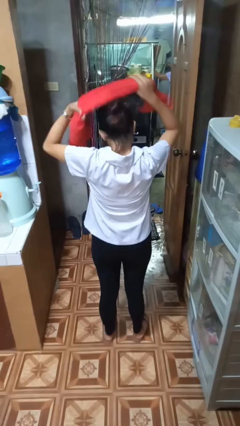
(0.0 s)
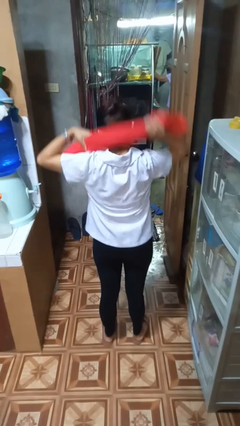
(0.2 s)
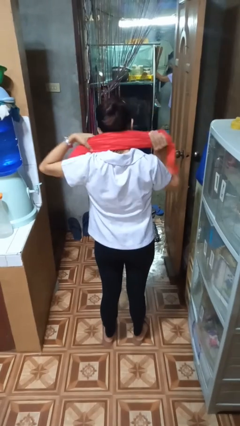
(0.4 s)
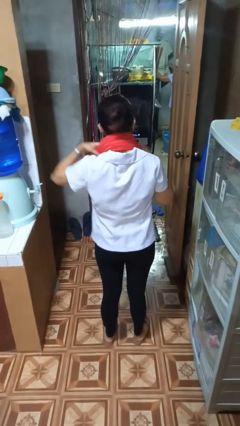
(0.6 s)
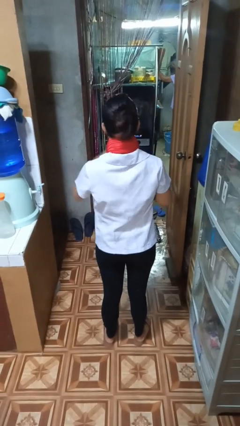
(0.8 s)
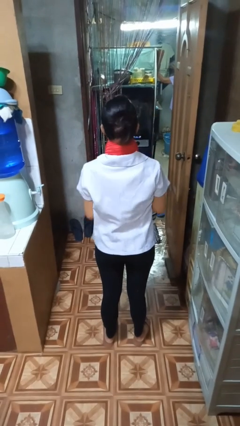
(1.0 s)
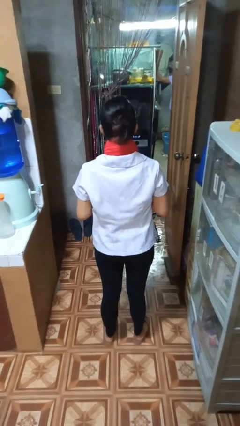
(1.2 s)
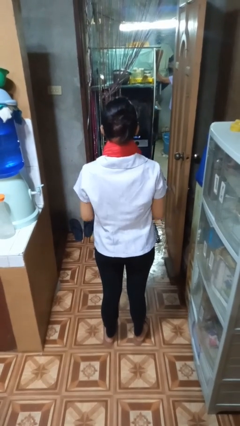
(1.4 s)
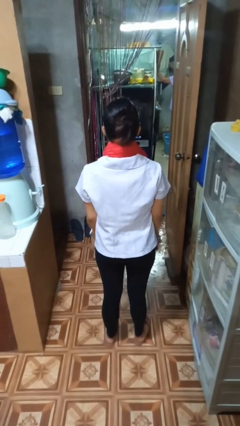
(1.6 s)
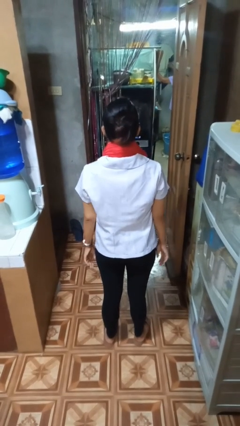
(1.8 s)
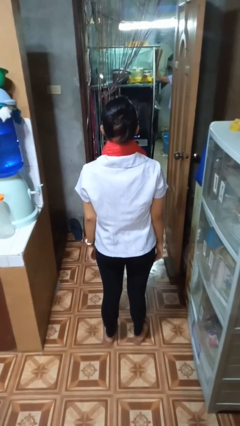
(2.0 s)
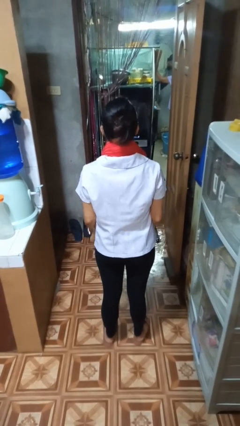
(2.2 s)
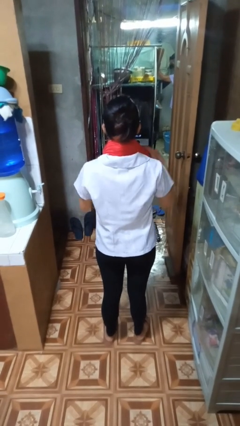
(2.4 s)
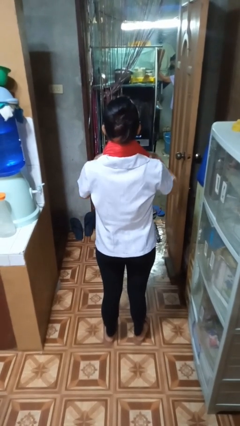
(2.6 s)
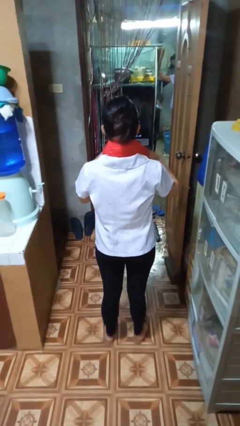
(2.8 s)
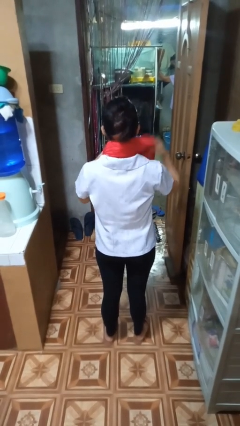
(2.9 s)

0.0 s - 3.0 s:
person puts on scarf

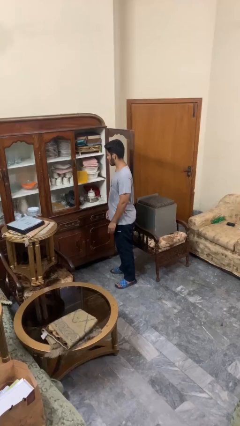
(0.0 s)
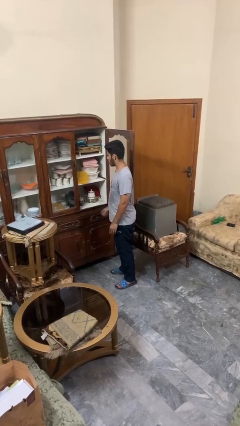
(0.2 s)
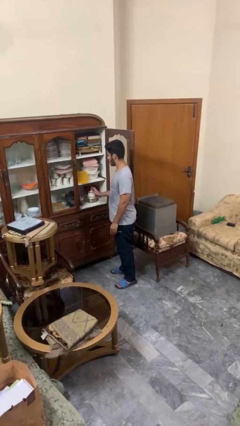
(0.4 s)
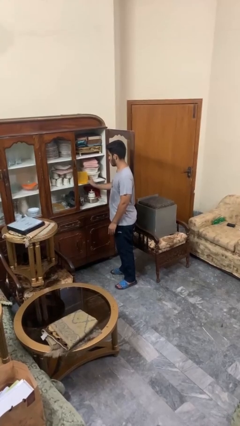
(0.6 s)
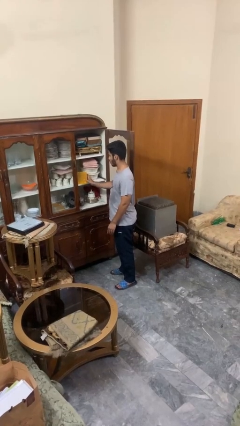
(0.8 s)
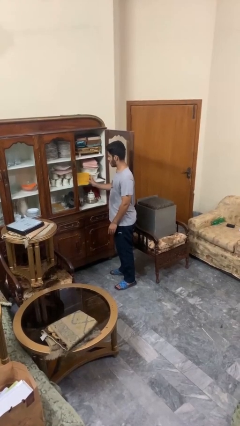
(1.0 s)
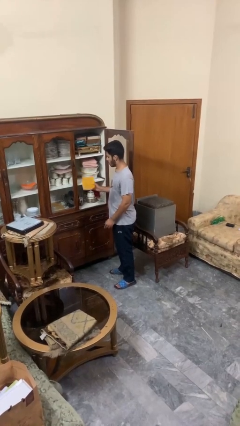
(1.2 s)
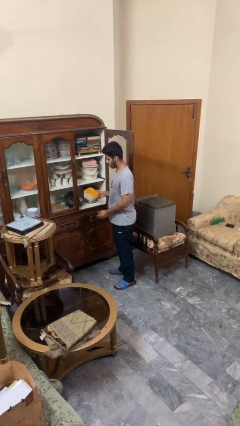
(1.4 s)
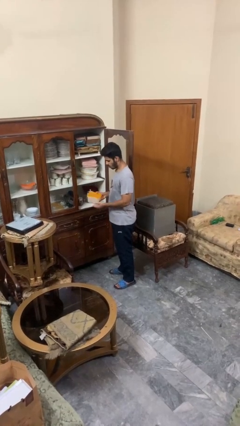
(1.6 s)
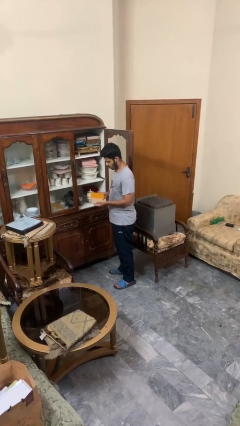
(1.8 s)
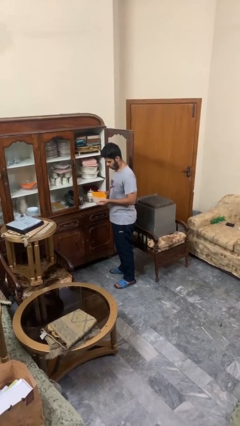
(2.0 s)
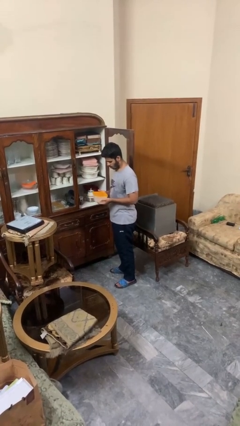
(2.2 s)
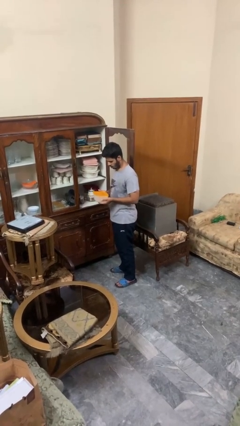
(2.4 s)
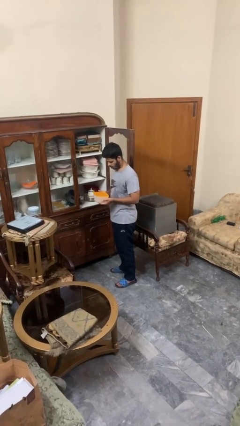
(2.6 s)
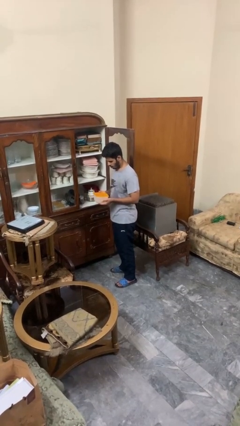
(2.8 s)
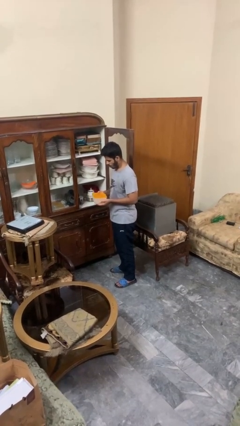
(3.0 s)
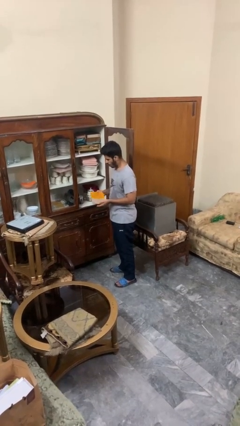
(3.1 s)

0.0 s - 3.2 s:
person picks up object from cabinet

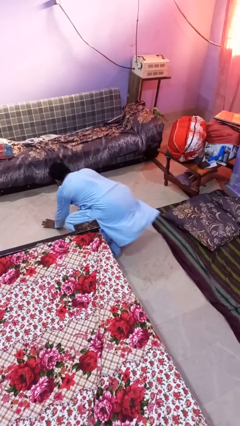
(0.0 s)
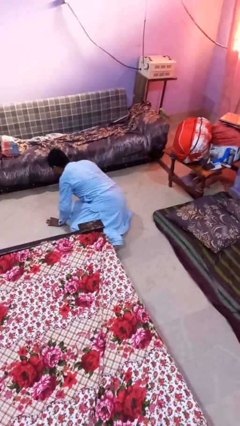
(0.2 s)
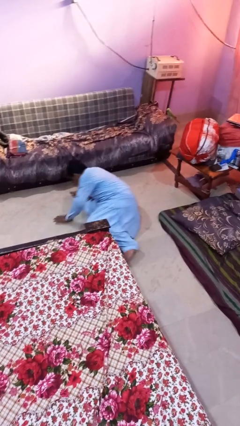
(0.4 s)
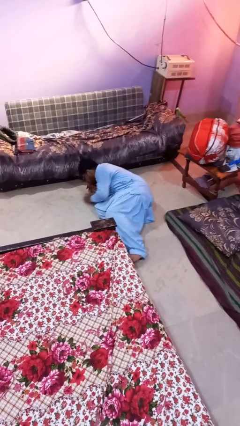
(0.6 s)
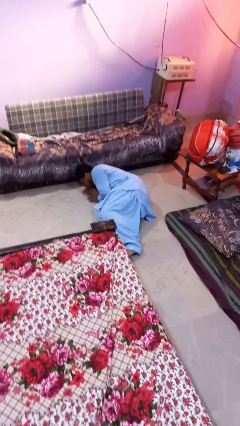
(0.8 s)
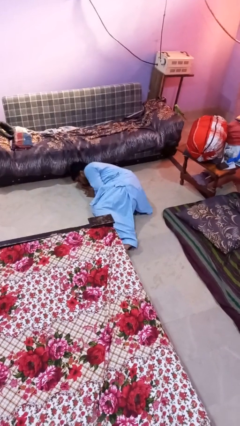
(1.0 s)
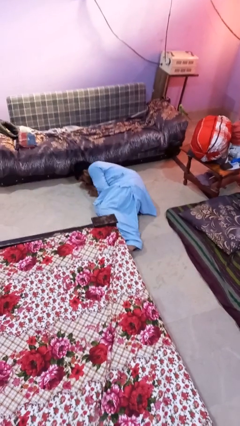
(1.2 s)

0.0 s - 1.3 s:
person lies down on floor

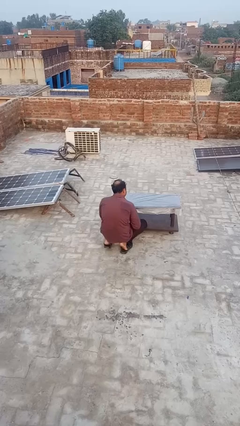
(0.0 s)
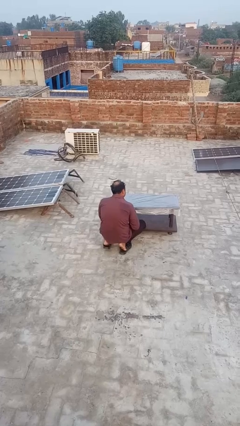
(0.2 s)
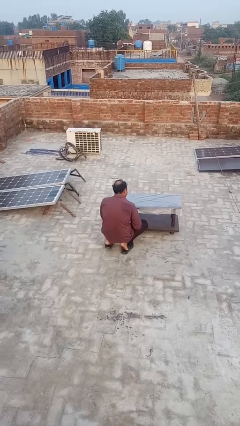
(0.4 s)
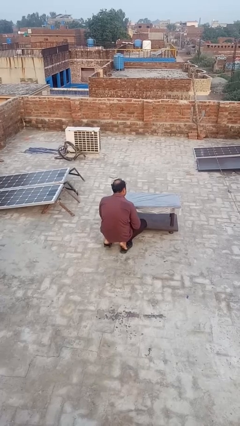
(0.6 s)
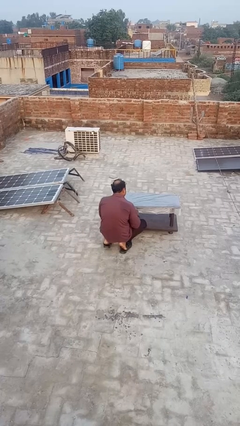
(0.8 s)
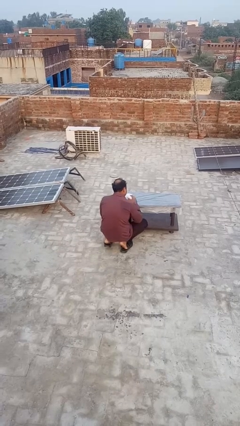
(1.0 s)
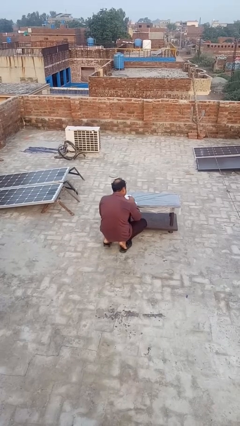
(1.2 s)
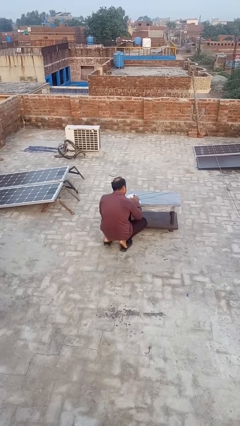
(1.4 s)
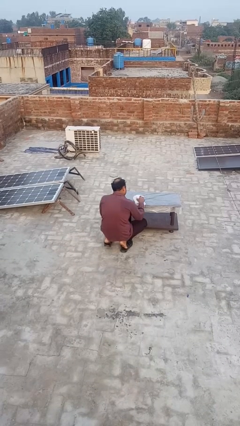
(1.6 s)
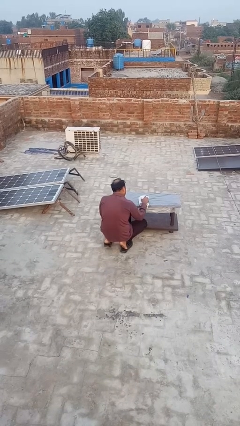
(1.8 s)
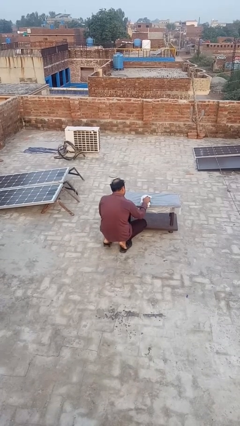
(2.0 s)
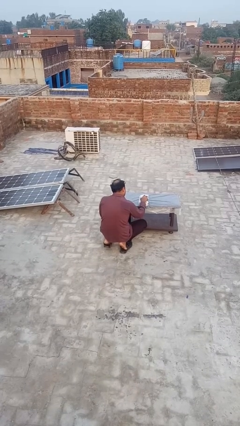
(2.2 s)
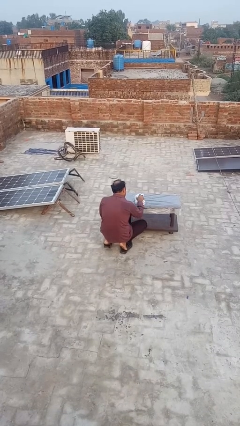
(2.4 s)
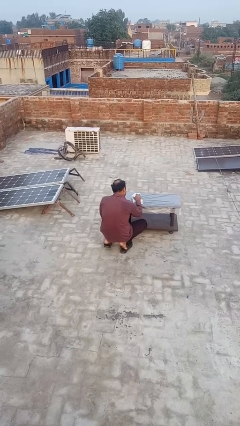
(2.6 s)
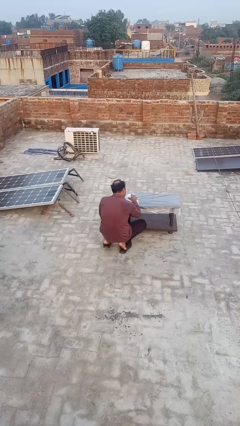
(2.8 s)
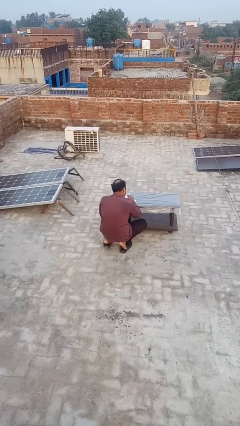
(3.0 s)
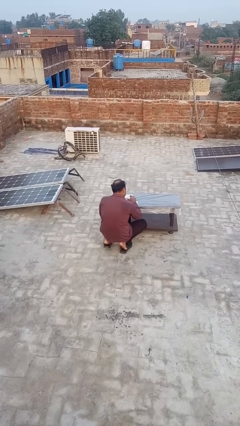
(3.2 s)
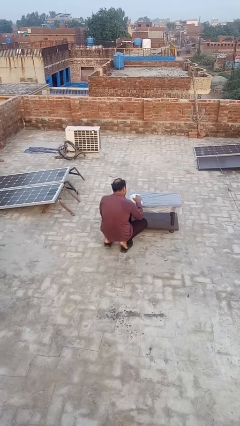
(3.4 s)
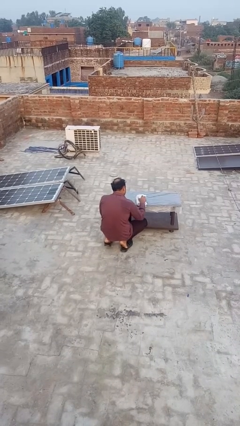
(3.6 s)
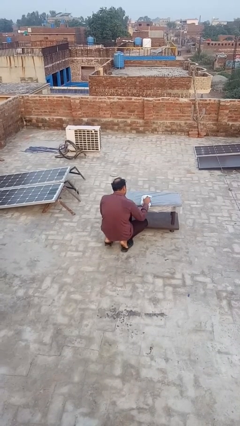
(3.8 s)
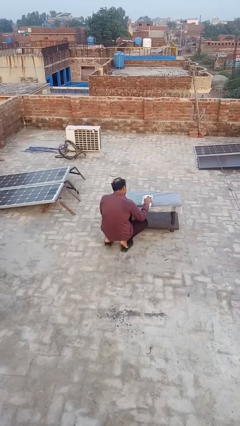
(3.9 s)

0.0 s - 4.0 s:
person cleans table with rag

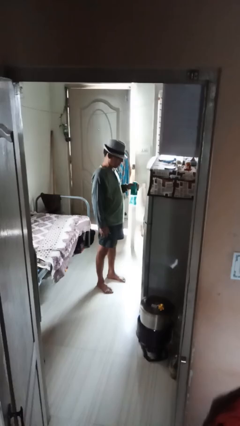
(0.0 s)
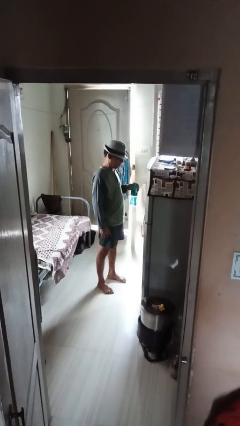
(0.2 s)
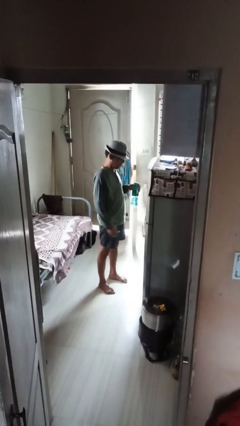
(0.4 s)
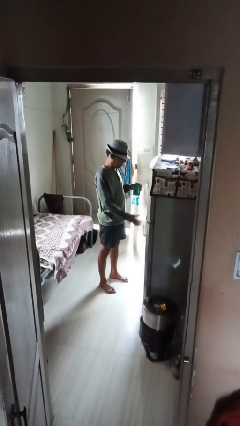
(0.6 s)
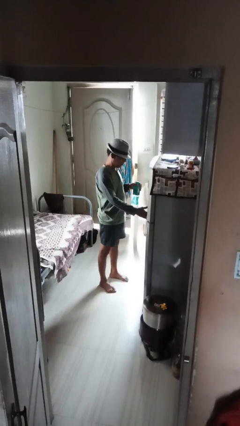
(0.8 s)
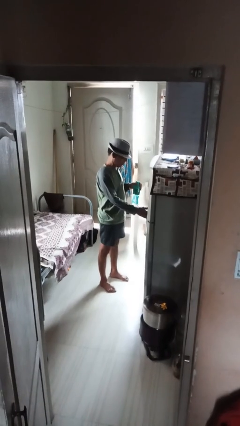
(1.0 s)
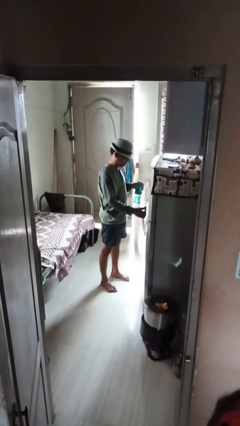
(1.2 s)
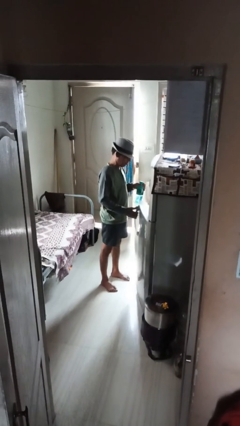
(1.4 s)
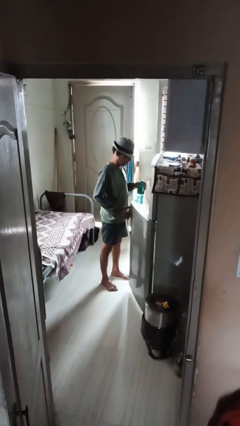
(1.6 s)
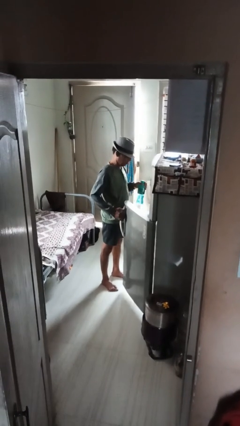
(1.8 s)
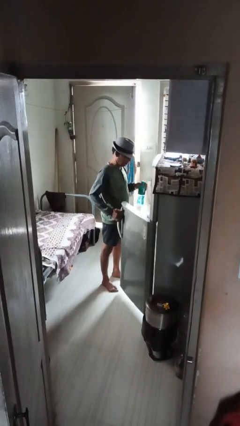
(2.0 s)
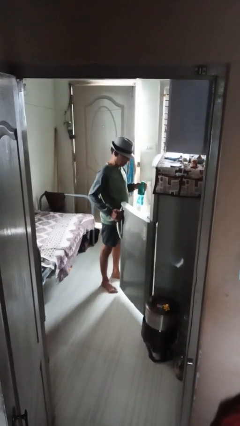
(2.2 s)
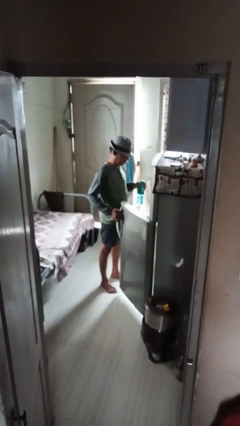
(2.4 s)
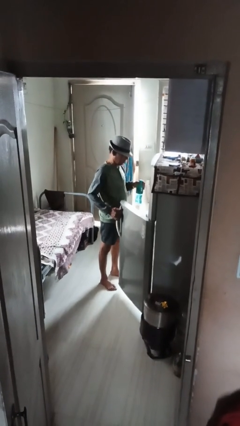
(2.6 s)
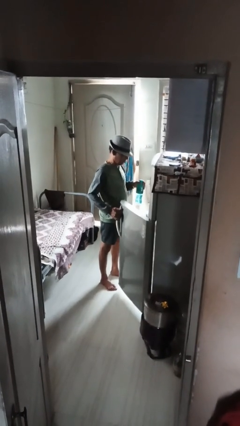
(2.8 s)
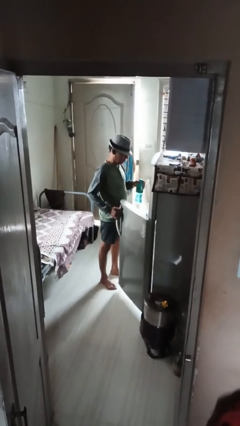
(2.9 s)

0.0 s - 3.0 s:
person opens refrigerator

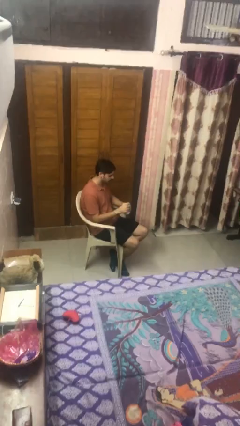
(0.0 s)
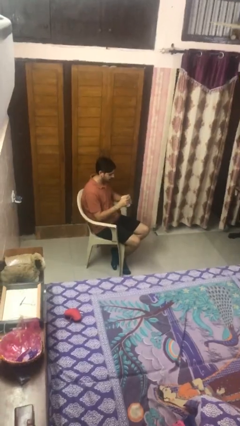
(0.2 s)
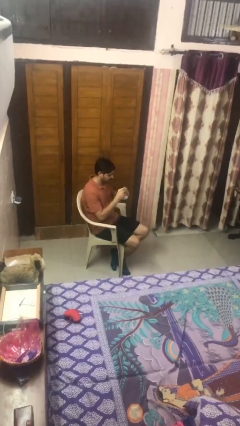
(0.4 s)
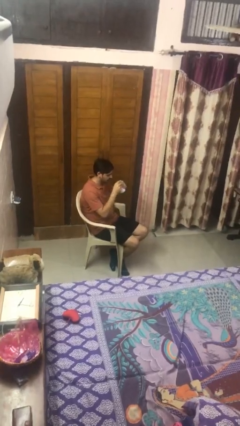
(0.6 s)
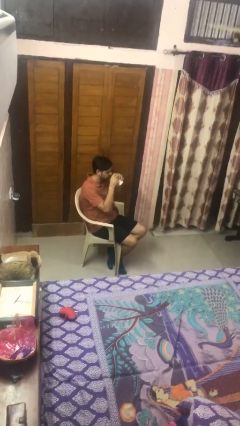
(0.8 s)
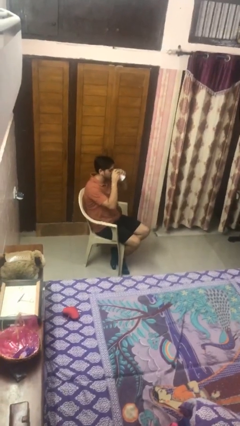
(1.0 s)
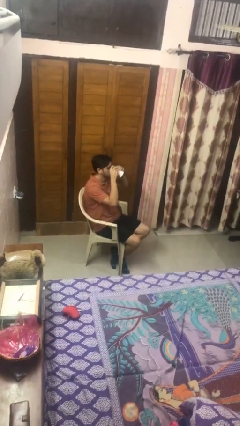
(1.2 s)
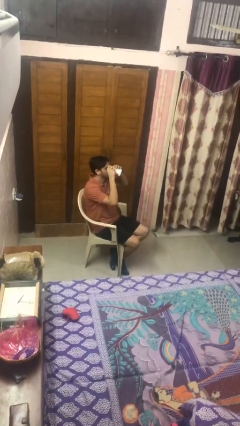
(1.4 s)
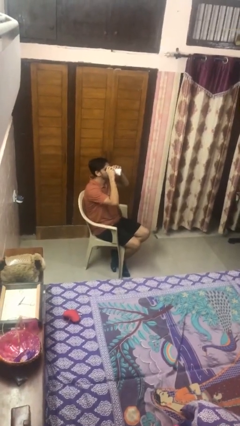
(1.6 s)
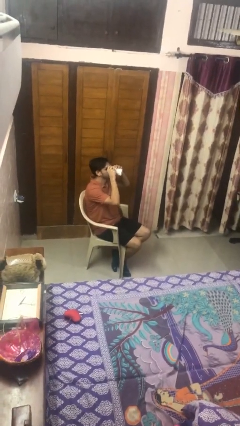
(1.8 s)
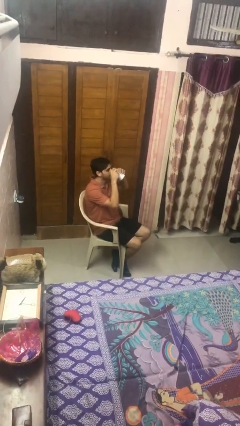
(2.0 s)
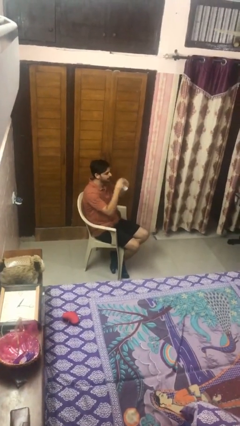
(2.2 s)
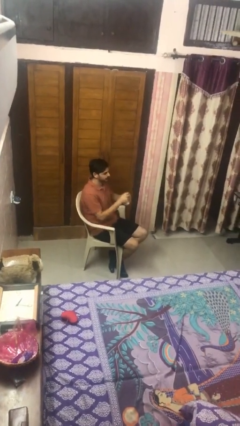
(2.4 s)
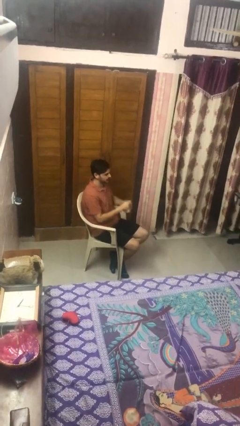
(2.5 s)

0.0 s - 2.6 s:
person drinks from mug

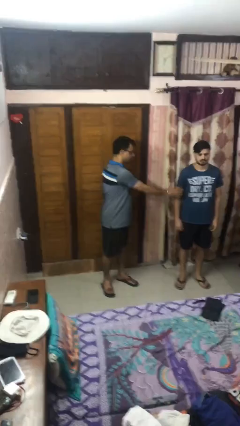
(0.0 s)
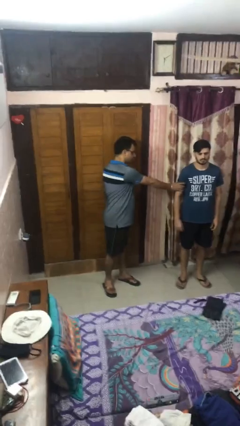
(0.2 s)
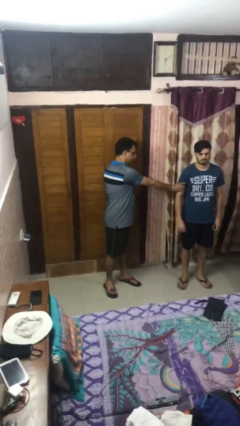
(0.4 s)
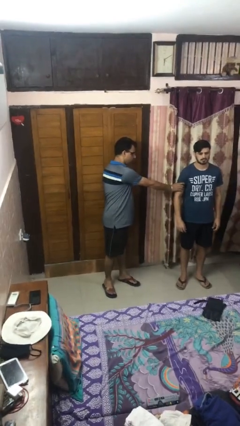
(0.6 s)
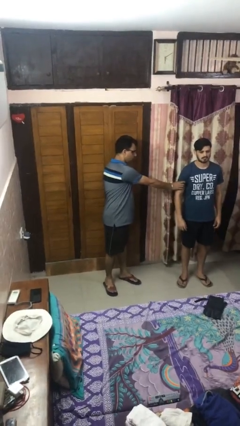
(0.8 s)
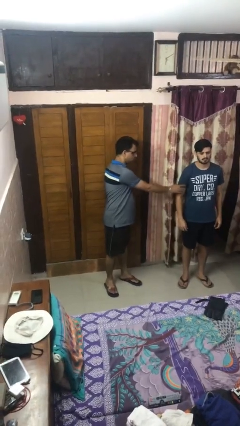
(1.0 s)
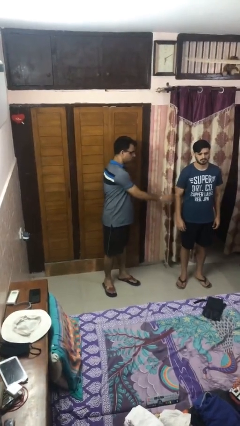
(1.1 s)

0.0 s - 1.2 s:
person grabs person by bicep
